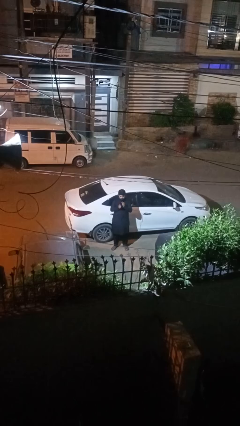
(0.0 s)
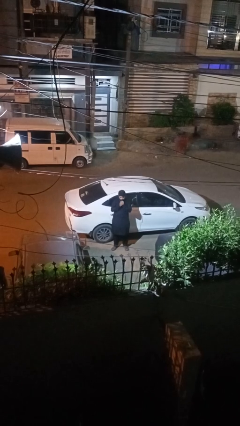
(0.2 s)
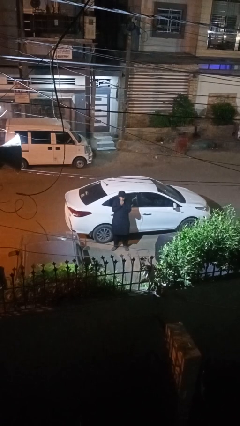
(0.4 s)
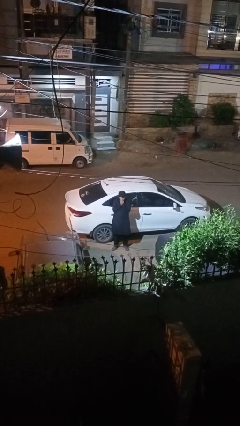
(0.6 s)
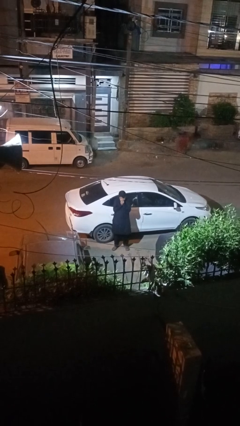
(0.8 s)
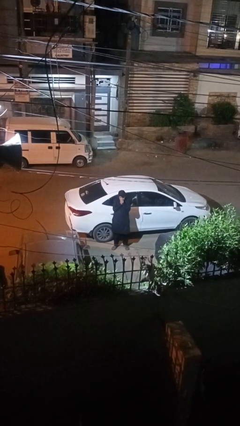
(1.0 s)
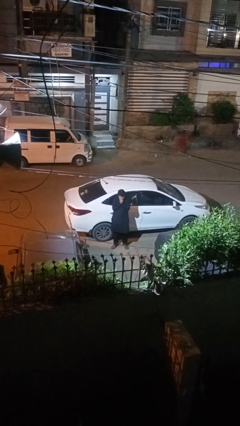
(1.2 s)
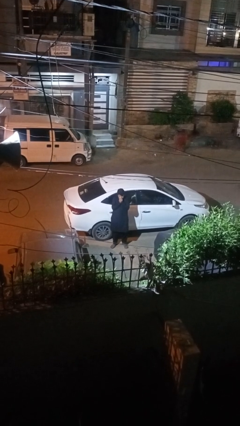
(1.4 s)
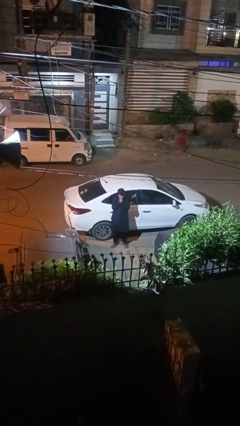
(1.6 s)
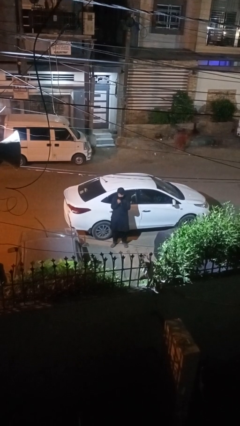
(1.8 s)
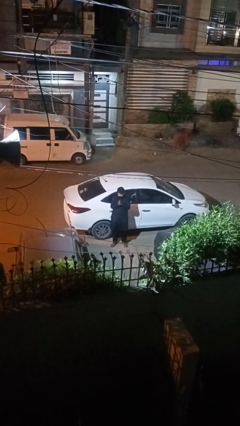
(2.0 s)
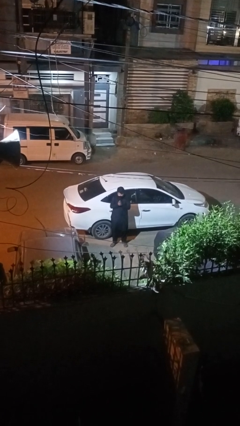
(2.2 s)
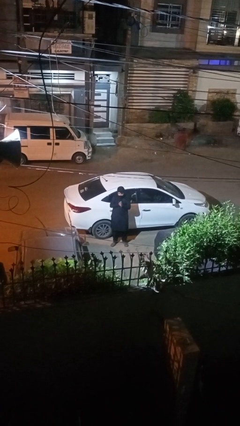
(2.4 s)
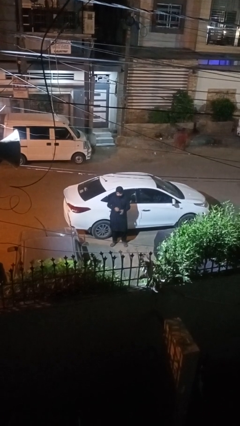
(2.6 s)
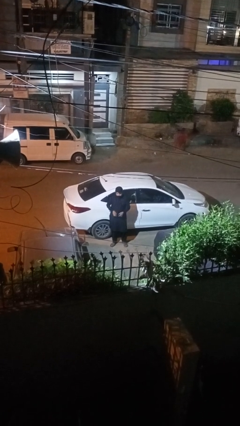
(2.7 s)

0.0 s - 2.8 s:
person blows into hands

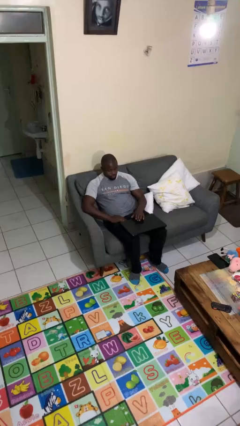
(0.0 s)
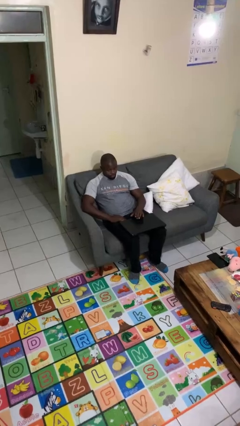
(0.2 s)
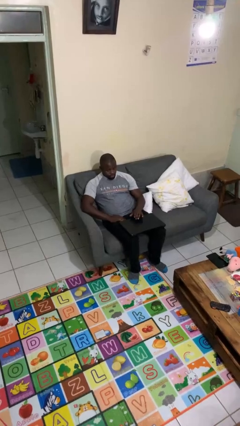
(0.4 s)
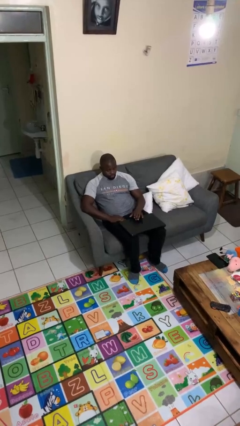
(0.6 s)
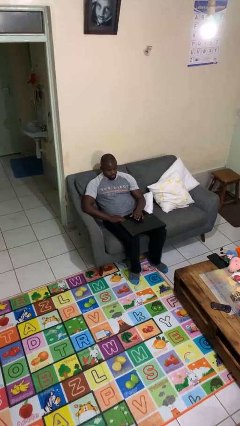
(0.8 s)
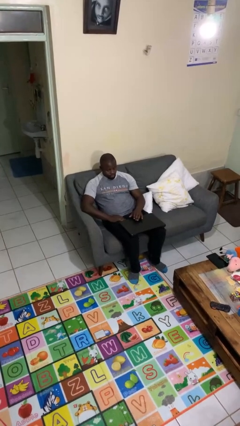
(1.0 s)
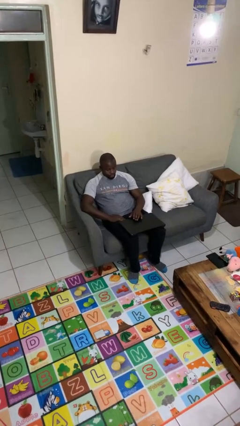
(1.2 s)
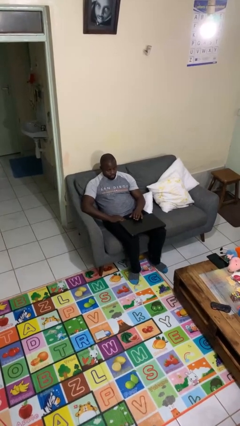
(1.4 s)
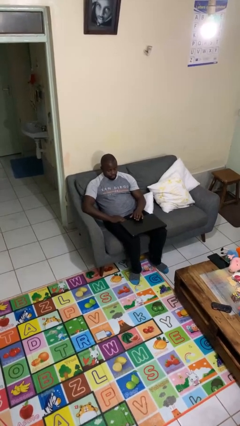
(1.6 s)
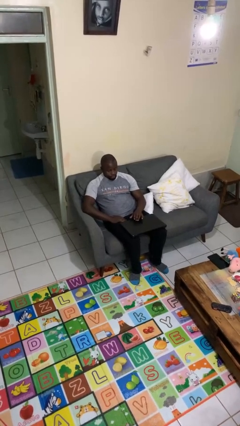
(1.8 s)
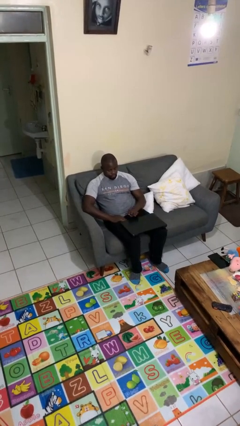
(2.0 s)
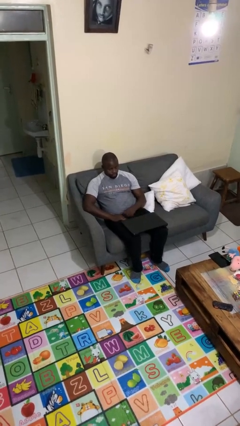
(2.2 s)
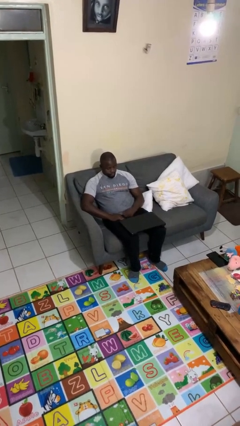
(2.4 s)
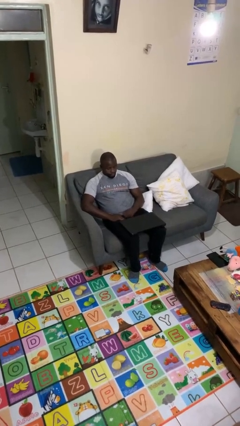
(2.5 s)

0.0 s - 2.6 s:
person taps object with finger

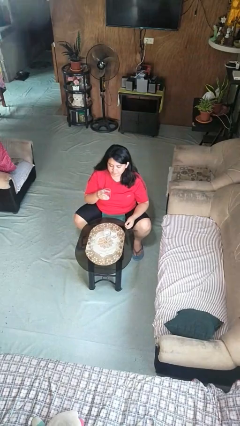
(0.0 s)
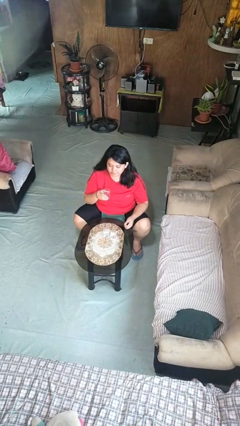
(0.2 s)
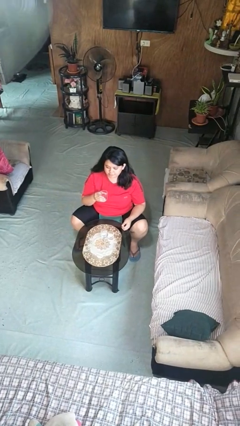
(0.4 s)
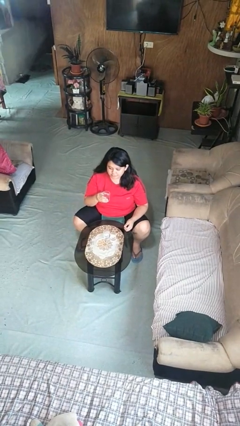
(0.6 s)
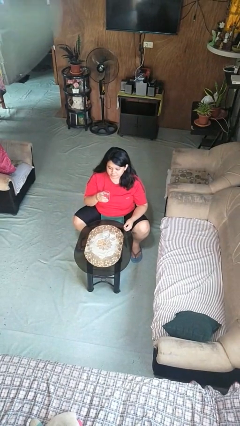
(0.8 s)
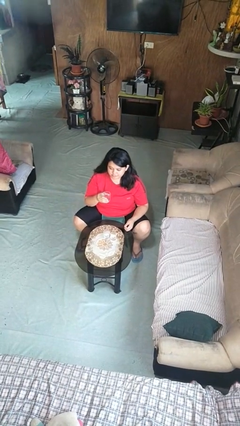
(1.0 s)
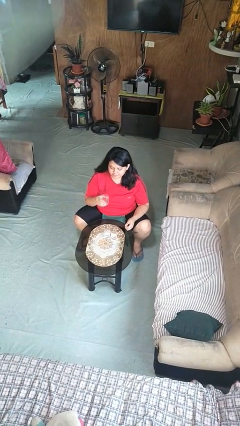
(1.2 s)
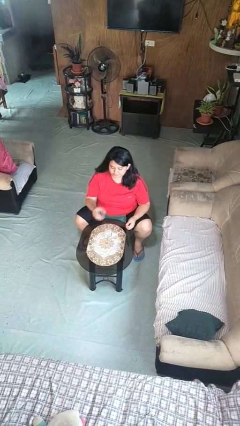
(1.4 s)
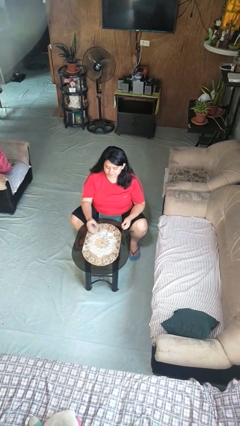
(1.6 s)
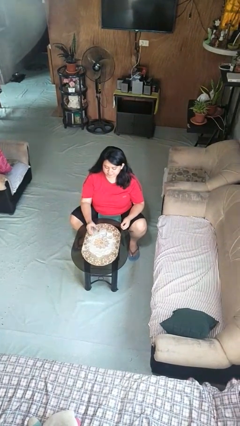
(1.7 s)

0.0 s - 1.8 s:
person puts down object on table

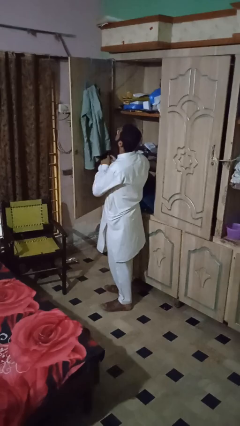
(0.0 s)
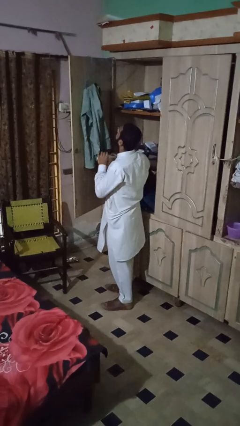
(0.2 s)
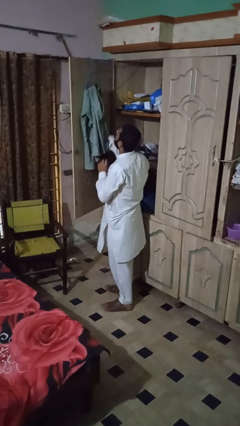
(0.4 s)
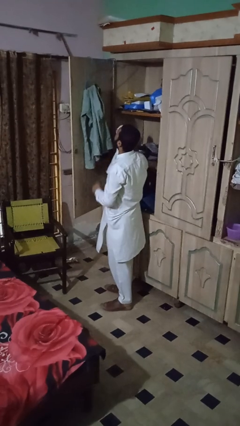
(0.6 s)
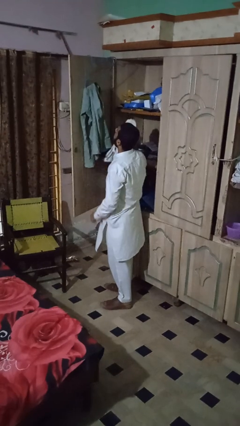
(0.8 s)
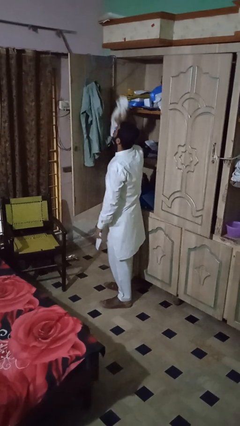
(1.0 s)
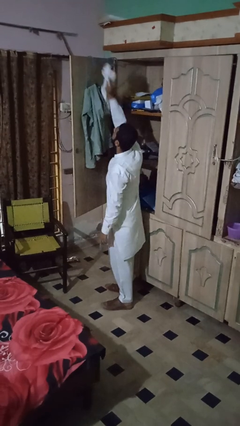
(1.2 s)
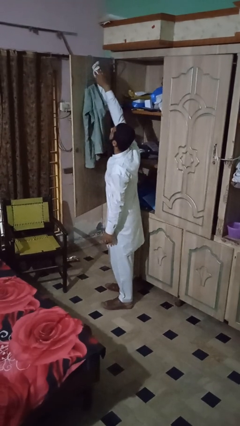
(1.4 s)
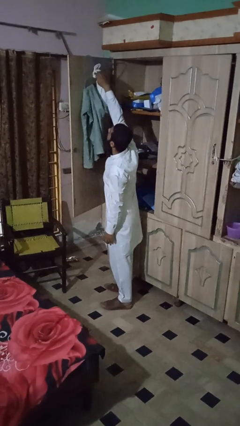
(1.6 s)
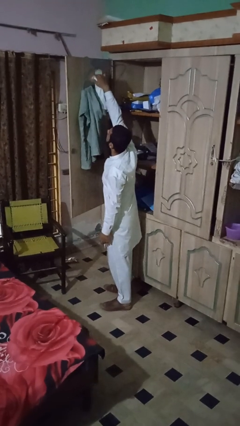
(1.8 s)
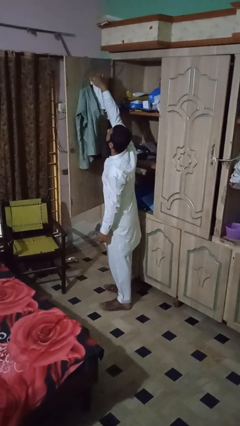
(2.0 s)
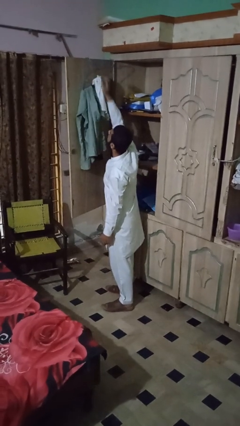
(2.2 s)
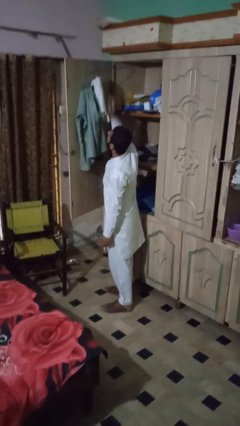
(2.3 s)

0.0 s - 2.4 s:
person puts clothes into closet

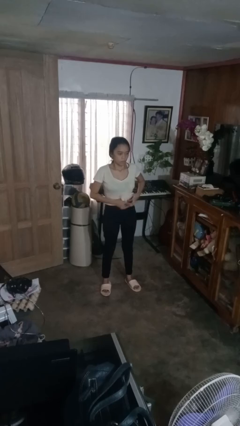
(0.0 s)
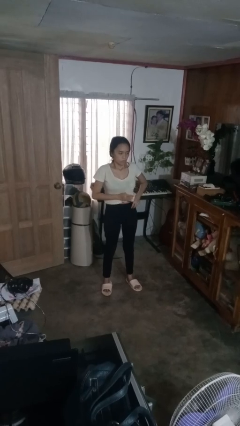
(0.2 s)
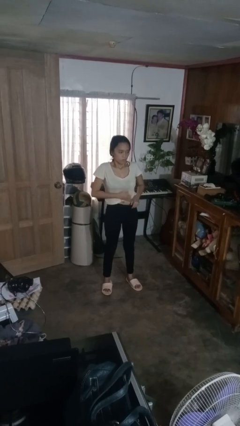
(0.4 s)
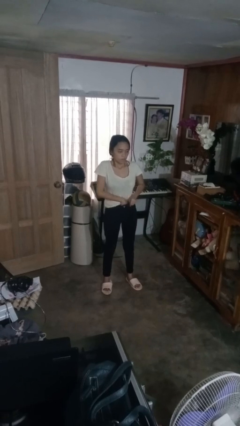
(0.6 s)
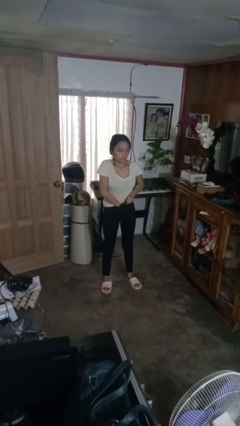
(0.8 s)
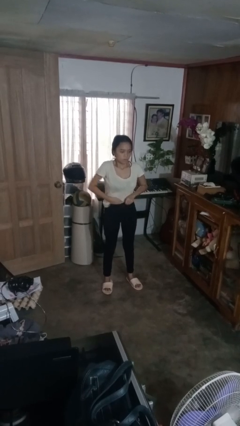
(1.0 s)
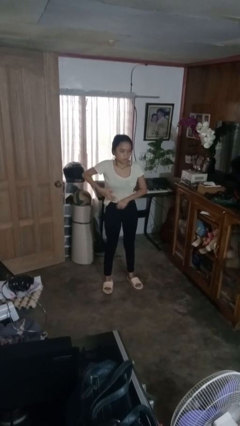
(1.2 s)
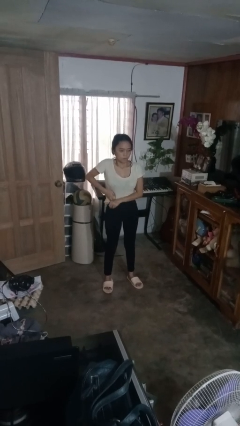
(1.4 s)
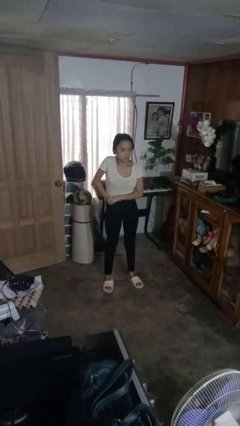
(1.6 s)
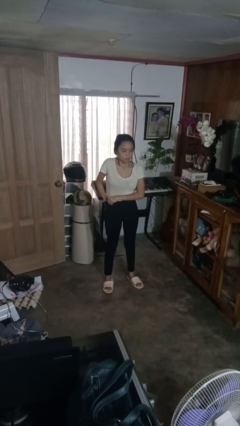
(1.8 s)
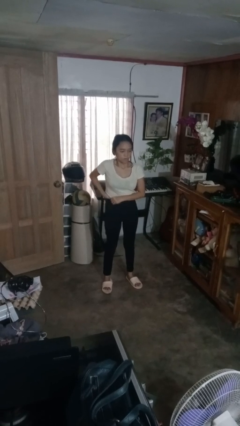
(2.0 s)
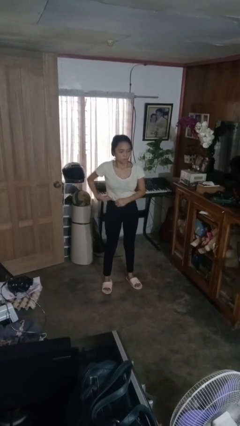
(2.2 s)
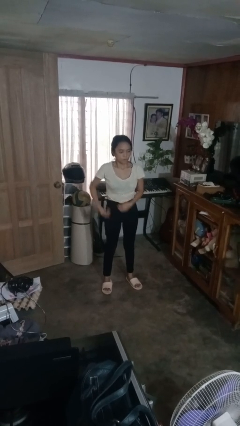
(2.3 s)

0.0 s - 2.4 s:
person tucks in shirt

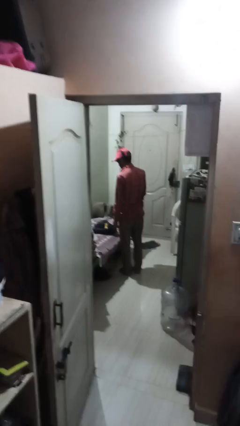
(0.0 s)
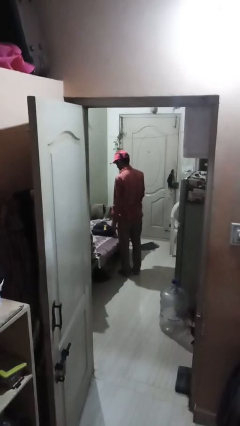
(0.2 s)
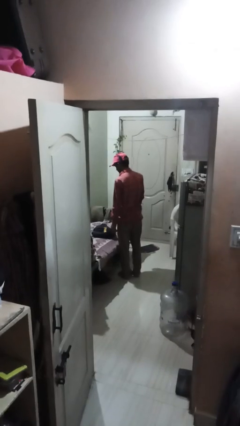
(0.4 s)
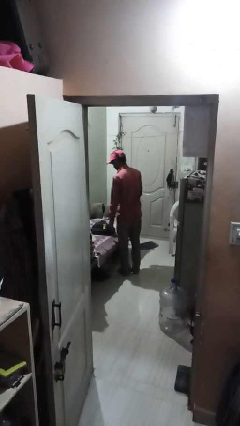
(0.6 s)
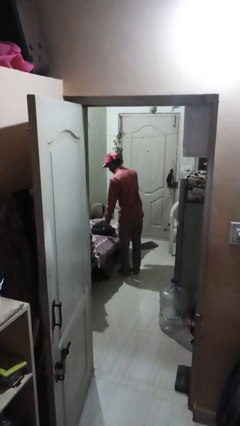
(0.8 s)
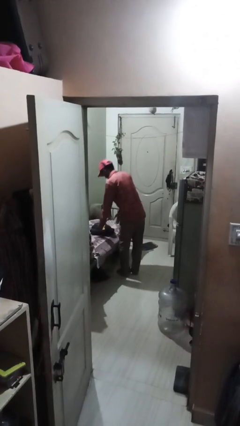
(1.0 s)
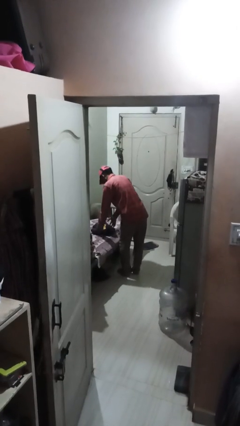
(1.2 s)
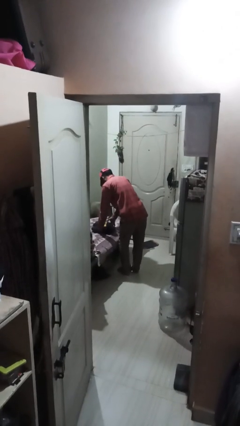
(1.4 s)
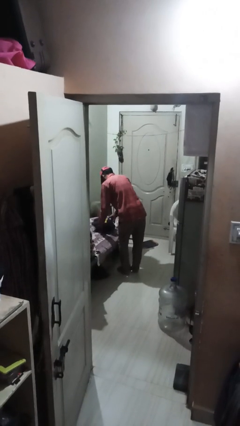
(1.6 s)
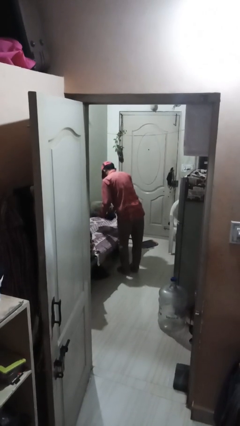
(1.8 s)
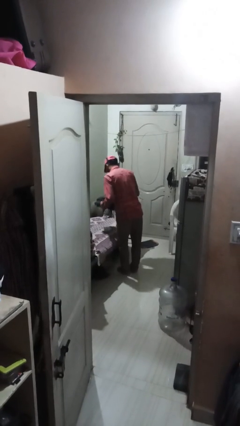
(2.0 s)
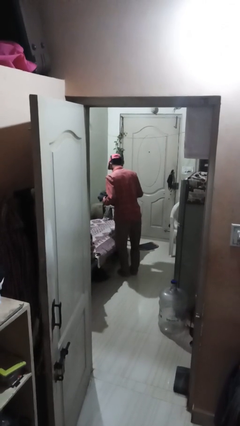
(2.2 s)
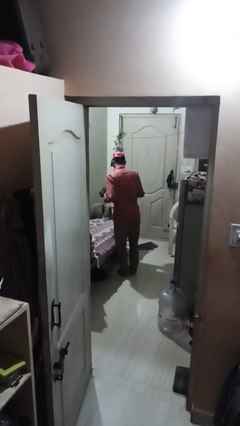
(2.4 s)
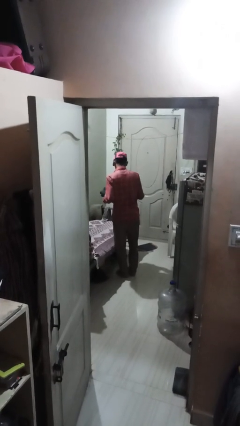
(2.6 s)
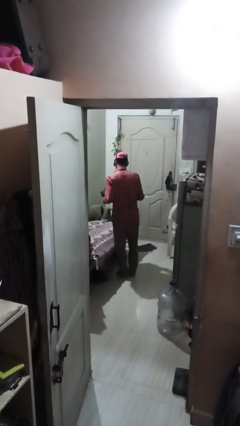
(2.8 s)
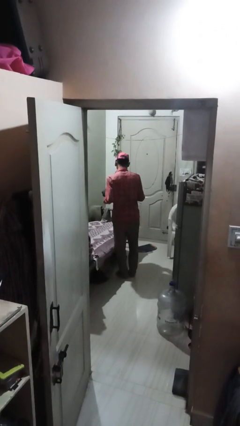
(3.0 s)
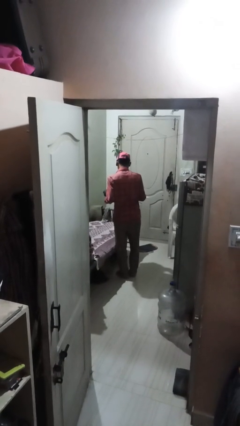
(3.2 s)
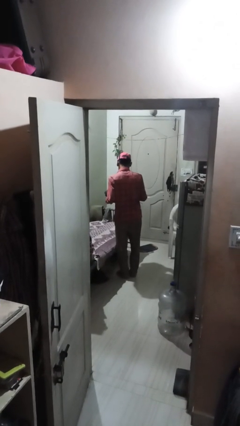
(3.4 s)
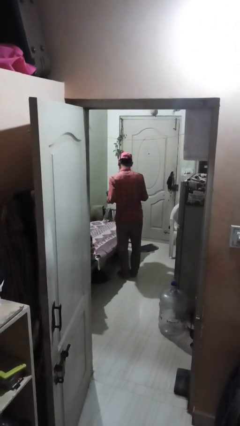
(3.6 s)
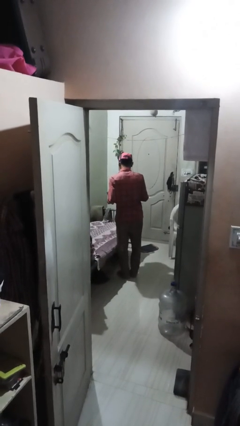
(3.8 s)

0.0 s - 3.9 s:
person picks up object from bed

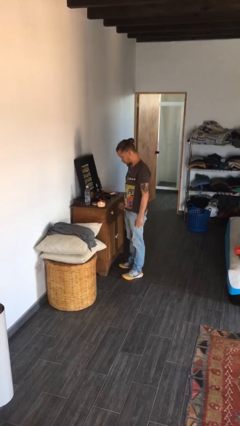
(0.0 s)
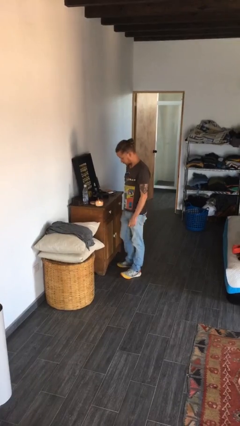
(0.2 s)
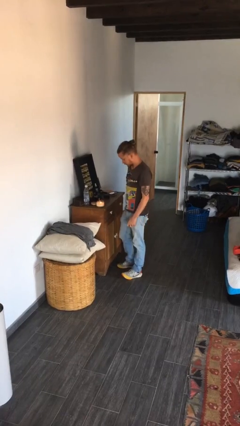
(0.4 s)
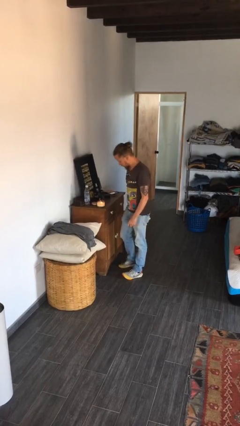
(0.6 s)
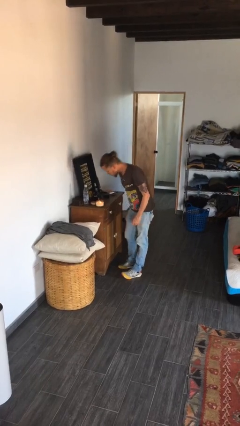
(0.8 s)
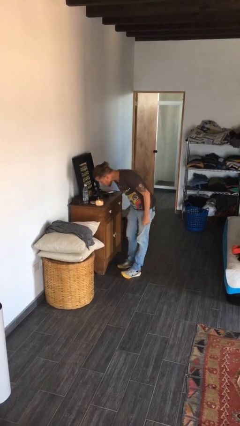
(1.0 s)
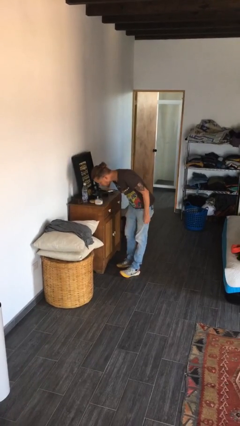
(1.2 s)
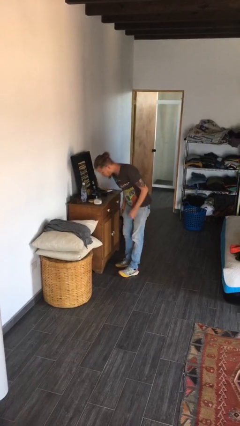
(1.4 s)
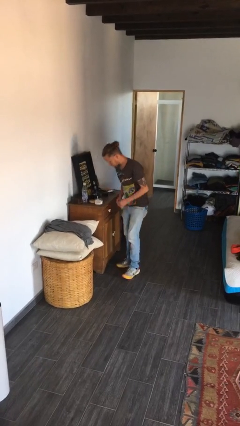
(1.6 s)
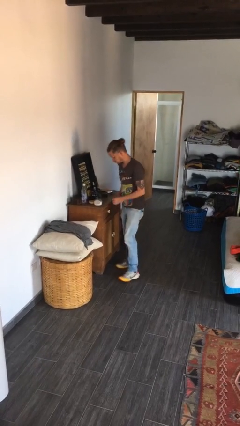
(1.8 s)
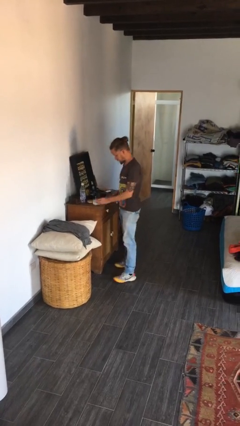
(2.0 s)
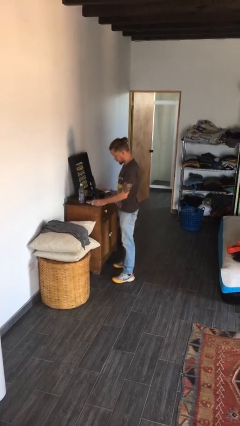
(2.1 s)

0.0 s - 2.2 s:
person extinguishes candle
